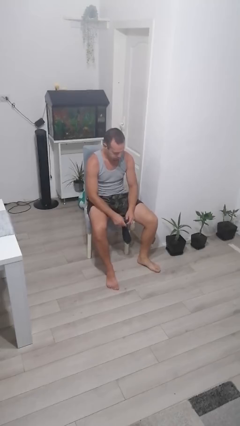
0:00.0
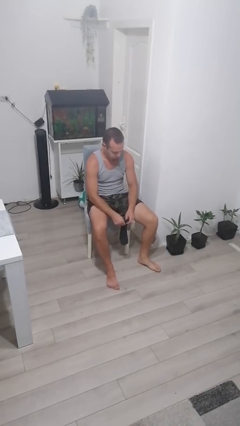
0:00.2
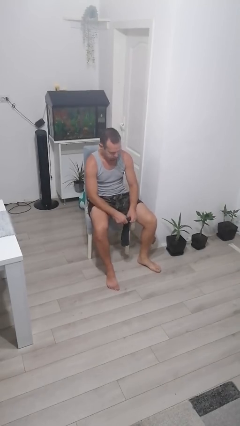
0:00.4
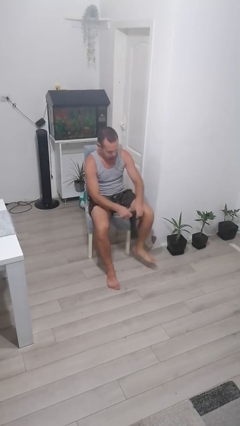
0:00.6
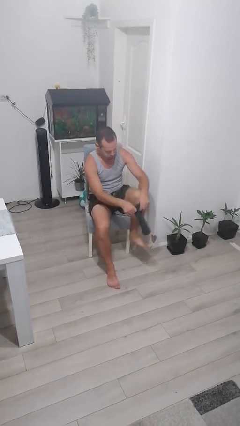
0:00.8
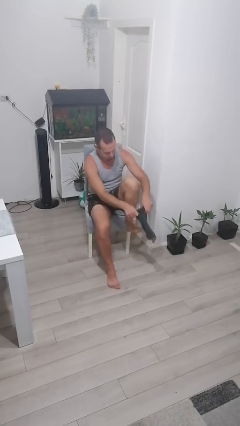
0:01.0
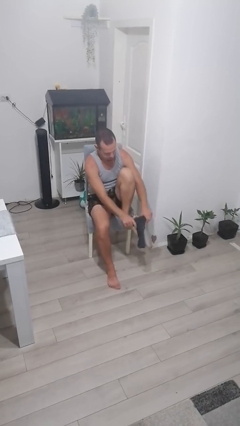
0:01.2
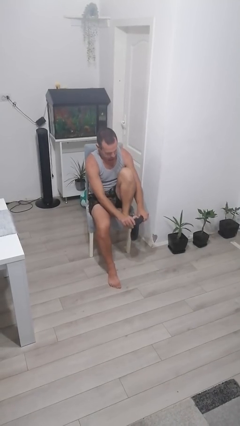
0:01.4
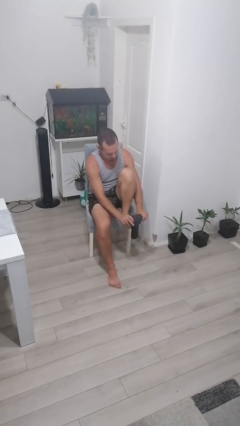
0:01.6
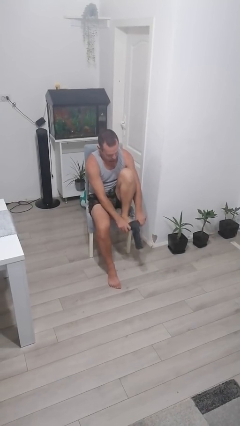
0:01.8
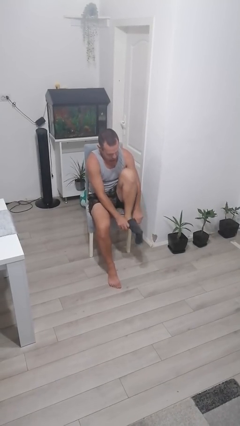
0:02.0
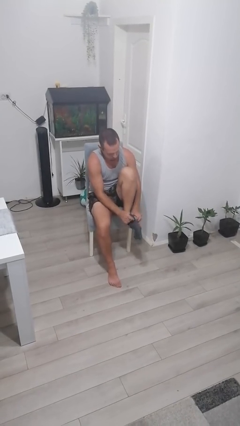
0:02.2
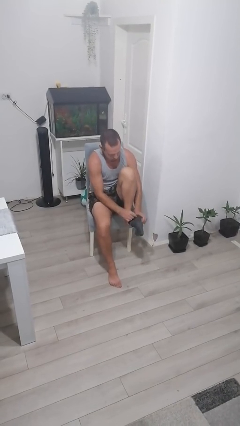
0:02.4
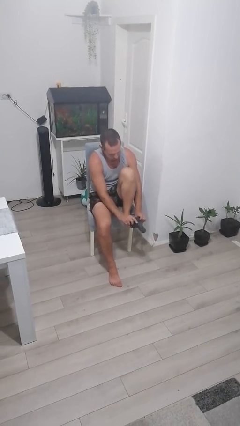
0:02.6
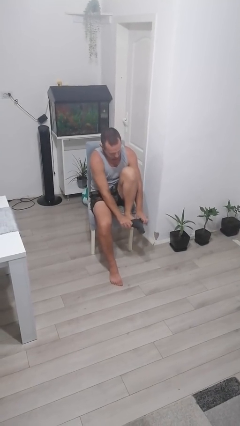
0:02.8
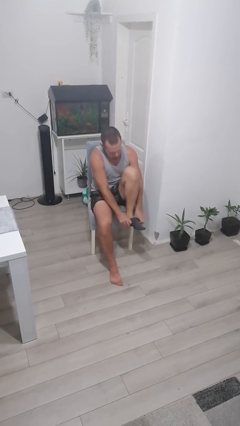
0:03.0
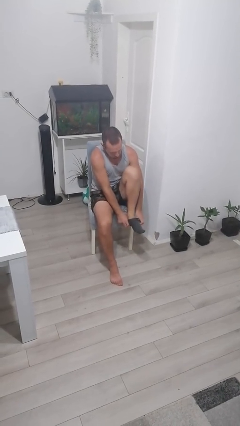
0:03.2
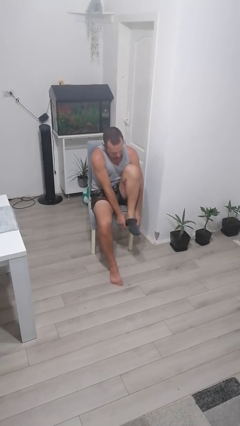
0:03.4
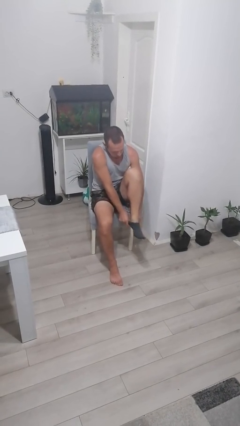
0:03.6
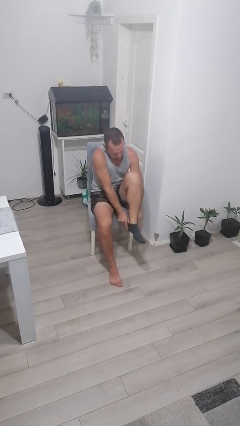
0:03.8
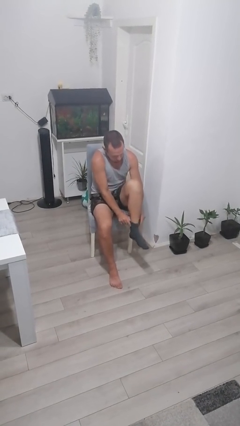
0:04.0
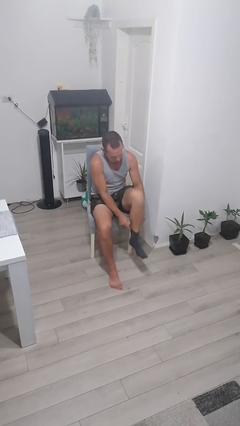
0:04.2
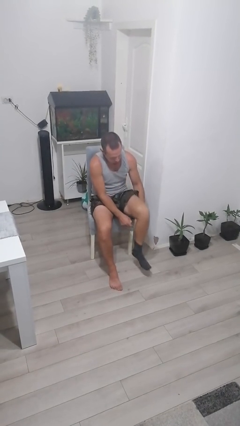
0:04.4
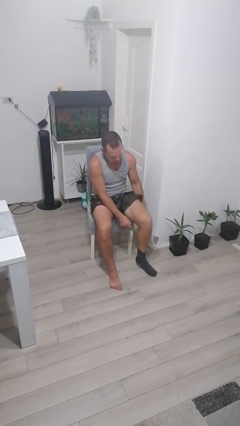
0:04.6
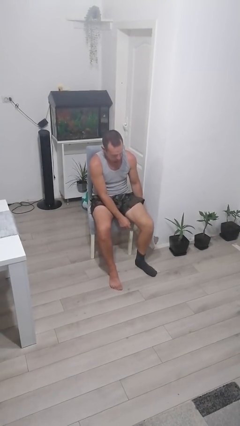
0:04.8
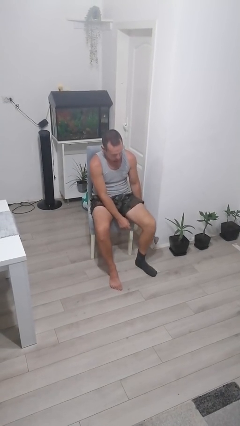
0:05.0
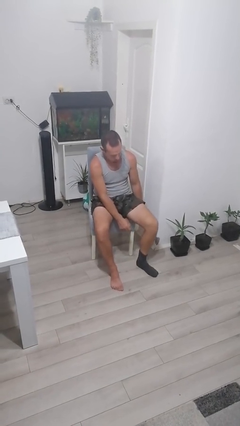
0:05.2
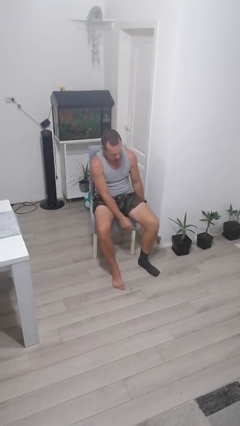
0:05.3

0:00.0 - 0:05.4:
person puts on socks

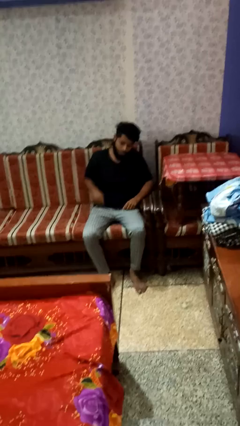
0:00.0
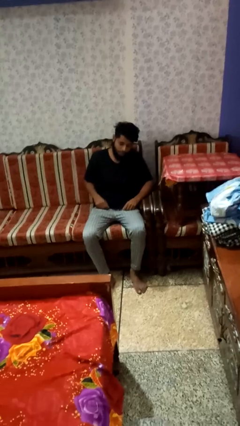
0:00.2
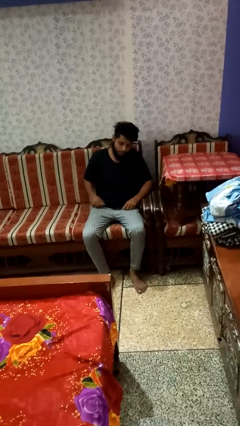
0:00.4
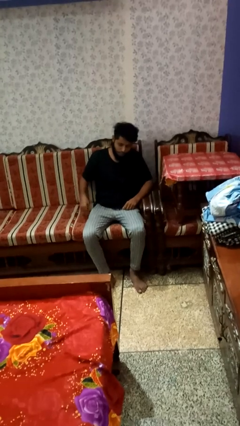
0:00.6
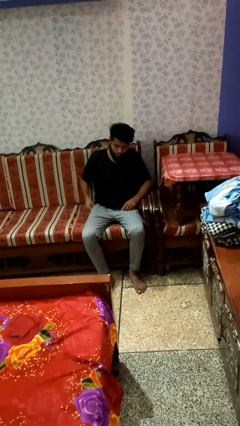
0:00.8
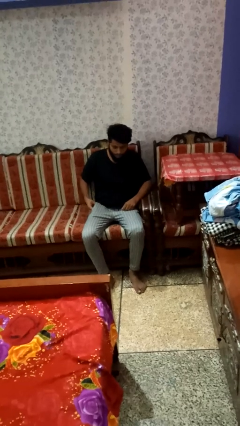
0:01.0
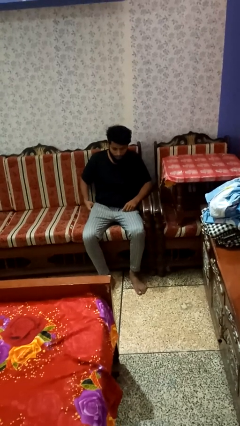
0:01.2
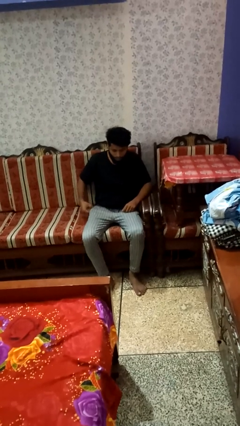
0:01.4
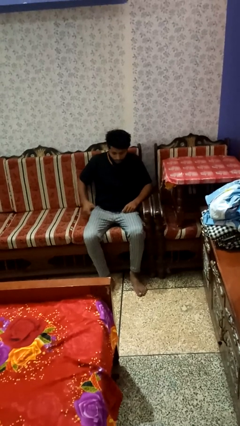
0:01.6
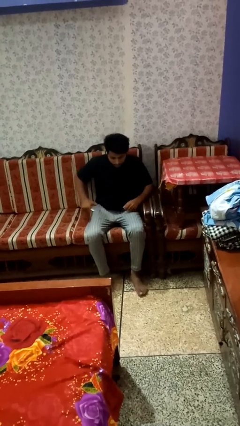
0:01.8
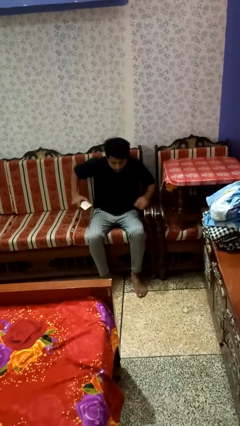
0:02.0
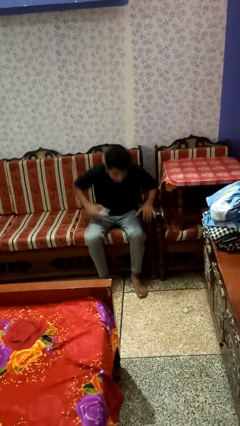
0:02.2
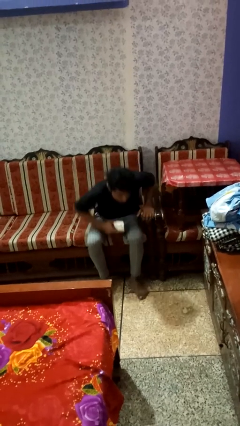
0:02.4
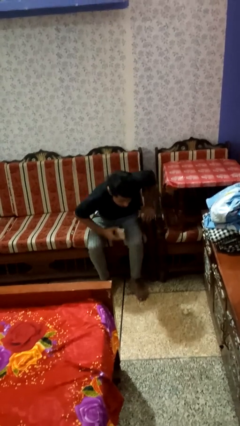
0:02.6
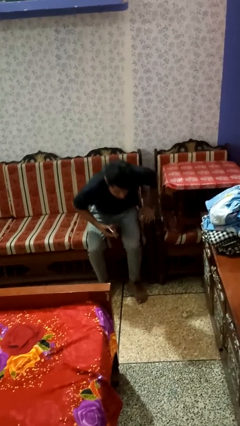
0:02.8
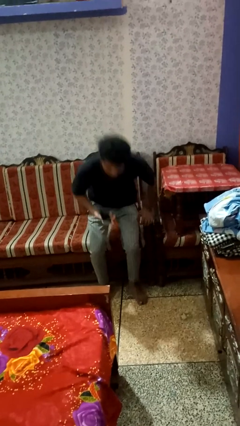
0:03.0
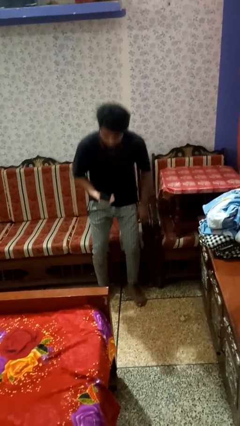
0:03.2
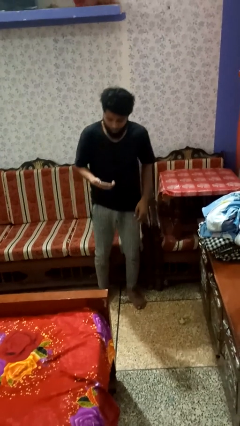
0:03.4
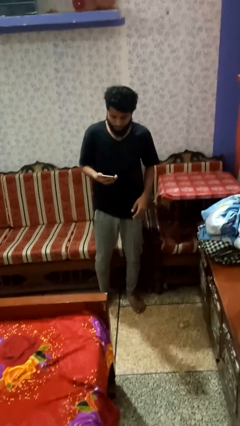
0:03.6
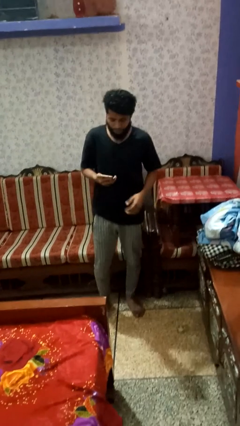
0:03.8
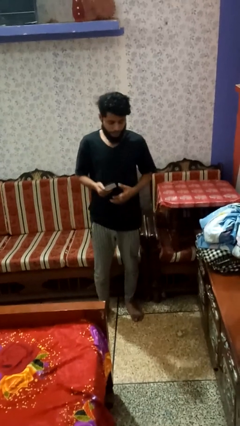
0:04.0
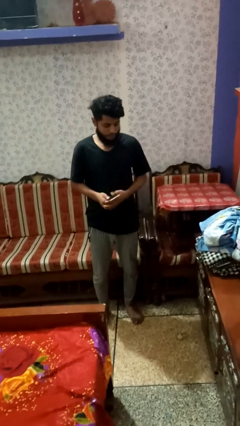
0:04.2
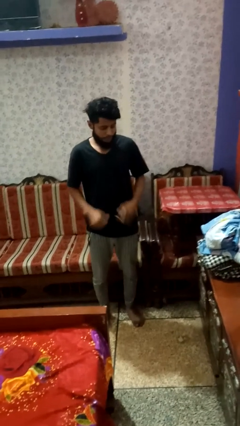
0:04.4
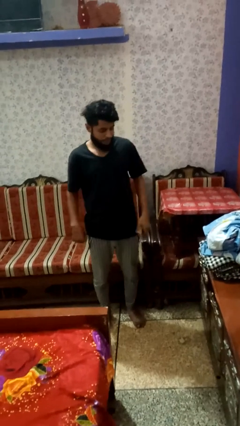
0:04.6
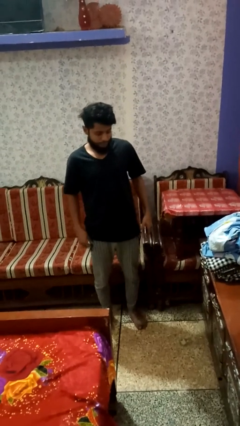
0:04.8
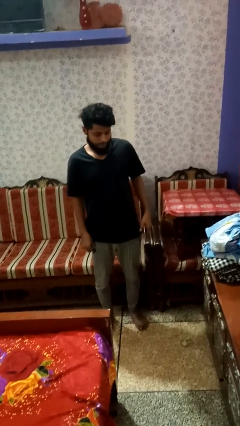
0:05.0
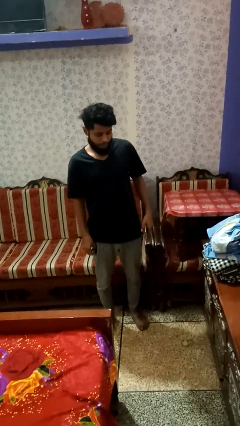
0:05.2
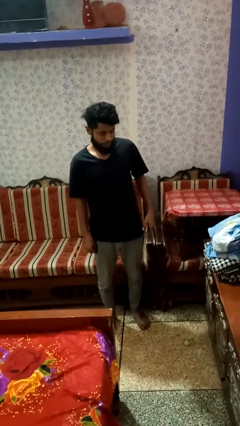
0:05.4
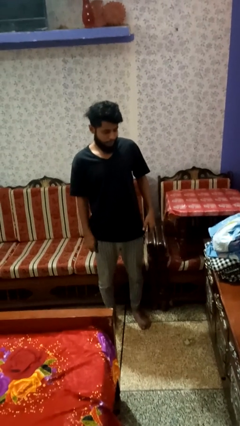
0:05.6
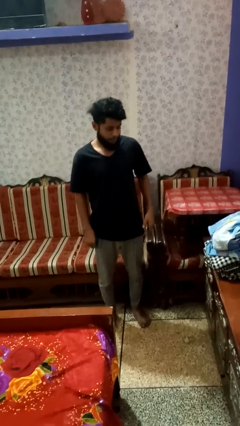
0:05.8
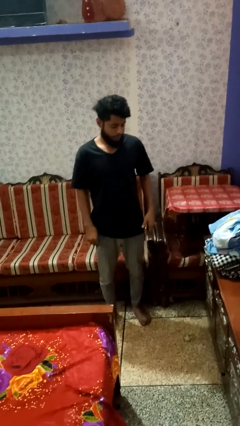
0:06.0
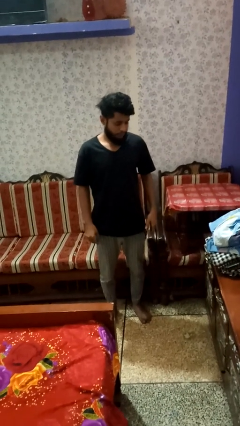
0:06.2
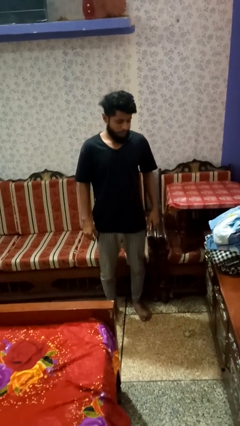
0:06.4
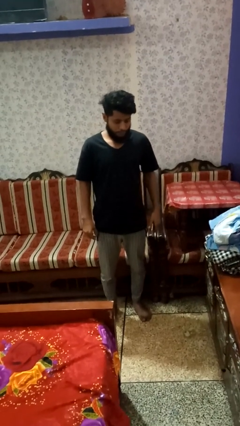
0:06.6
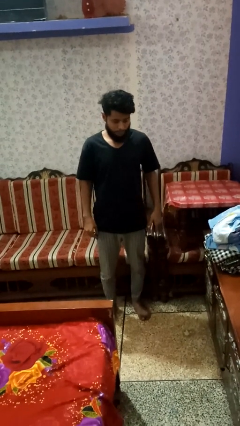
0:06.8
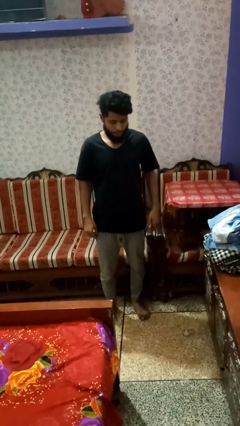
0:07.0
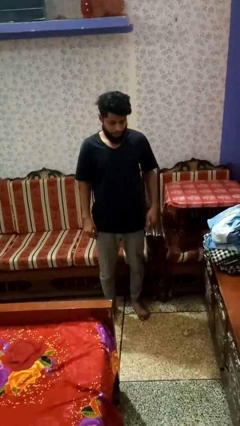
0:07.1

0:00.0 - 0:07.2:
person takes phone from pocket

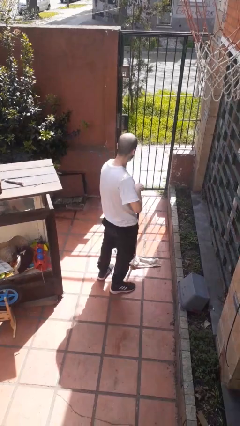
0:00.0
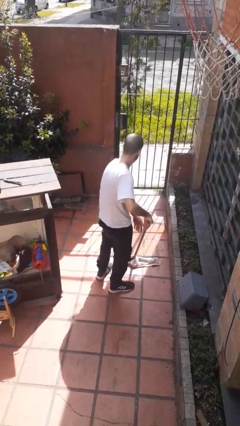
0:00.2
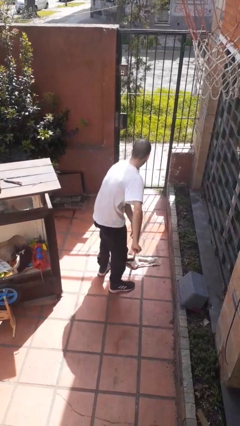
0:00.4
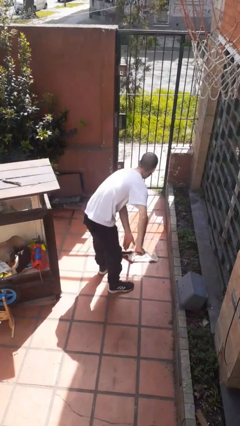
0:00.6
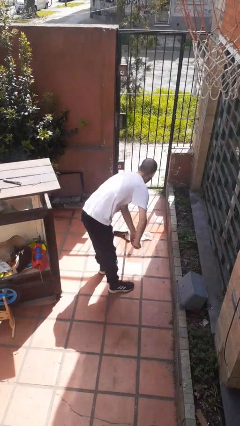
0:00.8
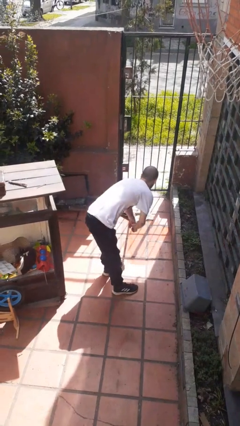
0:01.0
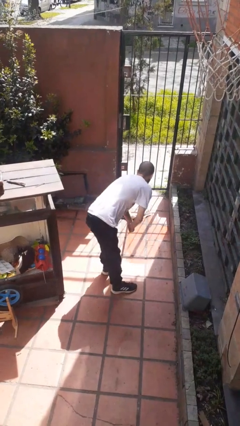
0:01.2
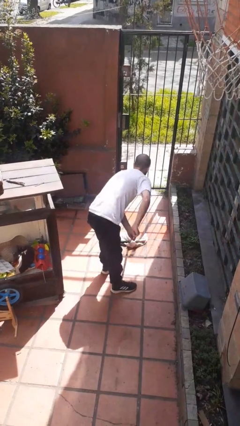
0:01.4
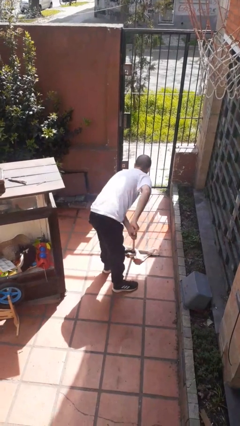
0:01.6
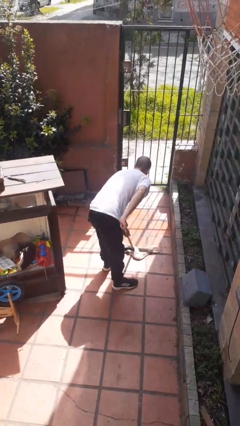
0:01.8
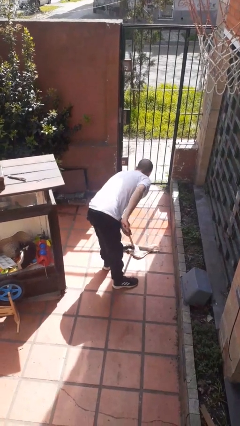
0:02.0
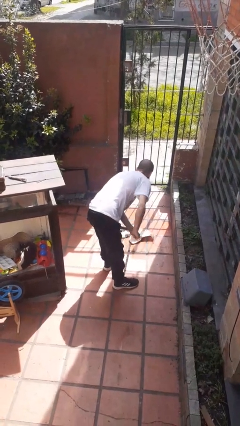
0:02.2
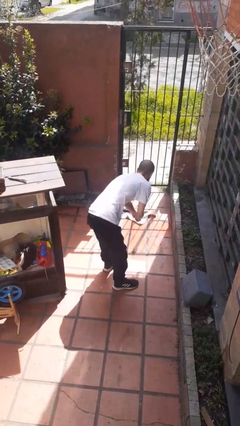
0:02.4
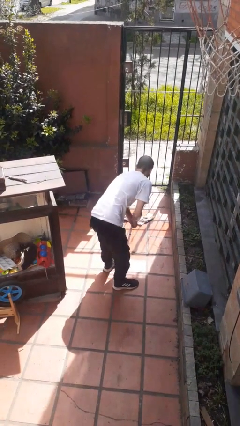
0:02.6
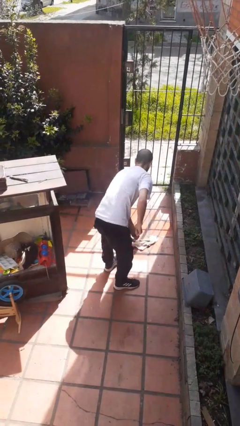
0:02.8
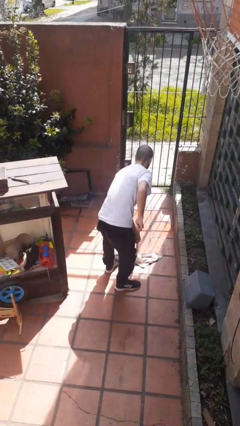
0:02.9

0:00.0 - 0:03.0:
person mops

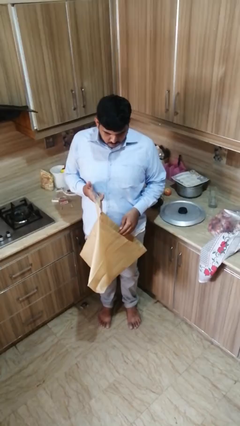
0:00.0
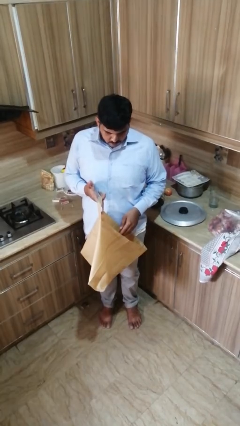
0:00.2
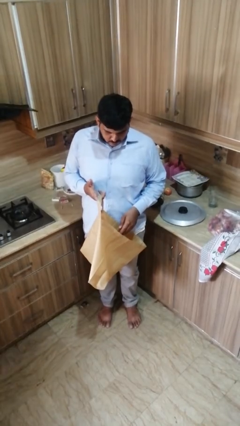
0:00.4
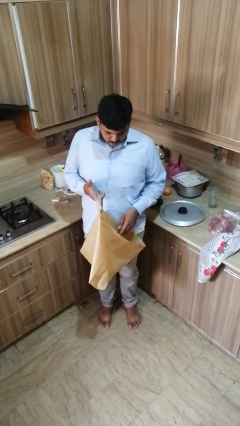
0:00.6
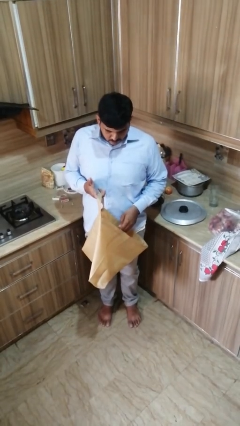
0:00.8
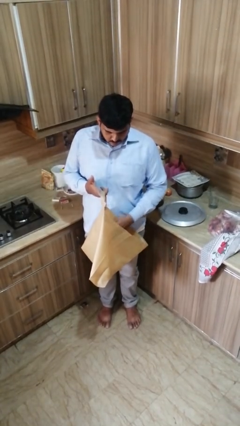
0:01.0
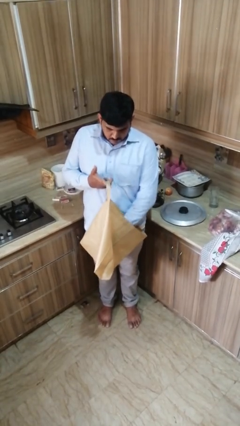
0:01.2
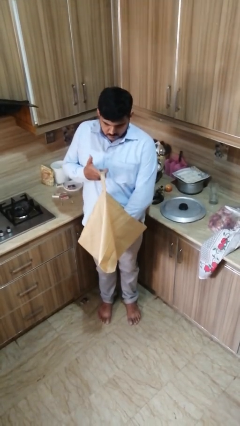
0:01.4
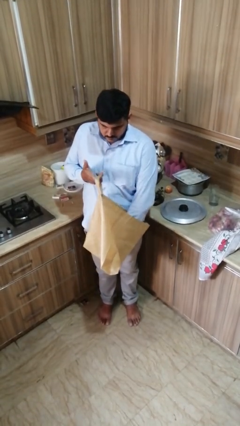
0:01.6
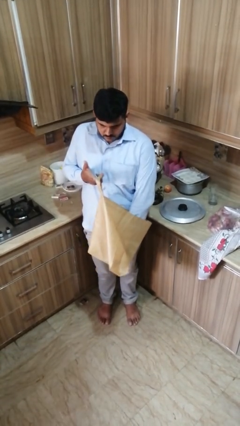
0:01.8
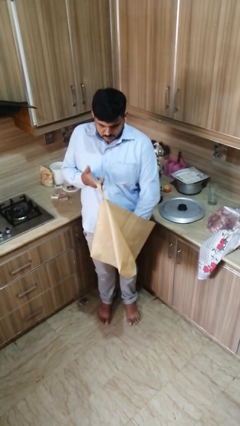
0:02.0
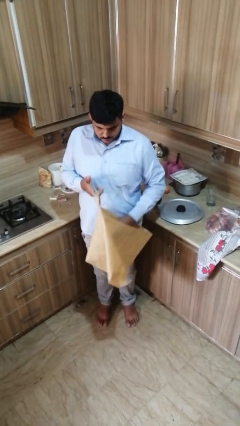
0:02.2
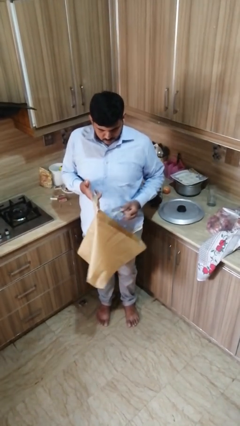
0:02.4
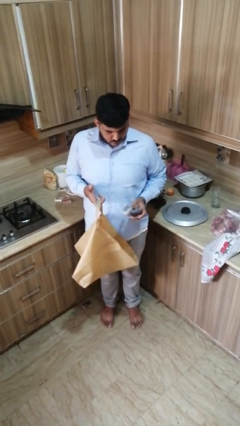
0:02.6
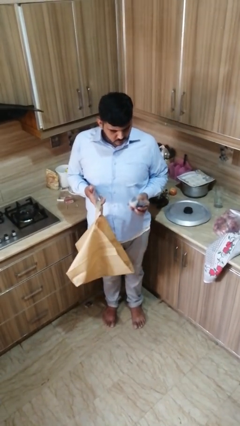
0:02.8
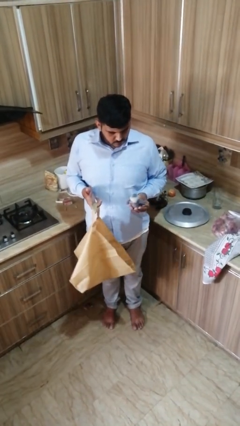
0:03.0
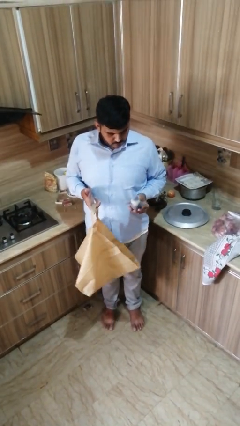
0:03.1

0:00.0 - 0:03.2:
person takes object from bag
